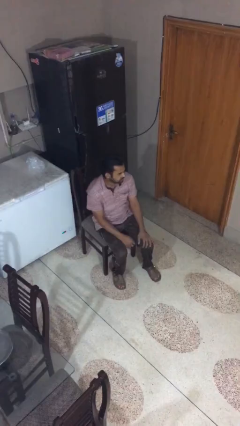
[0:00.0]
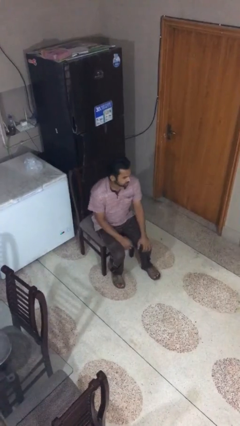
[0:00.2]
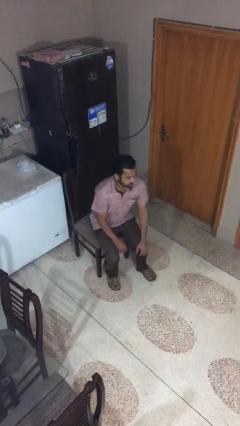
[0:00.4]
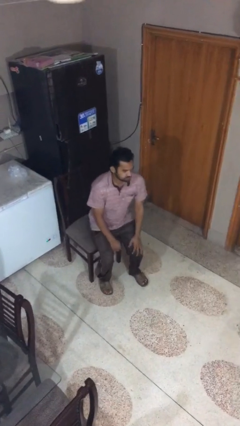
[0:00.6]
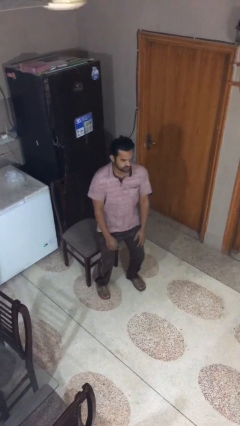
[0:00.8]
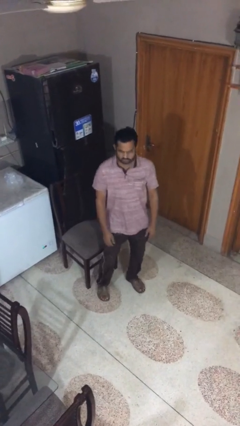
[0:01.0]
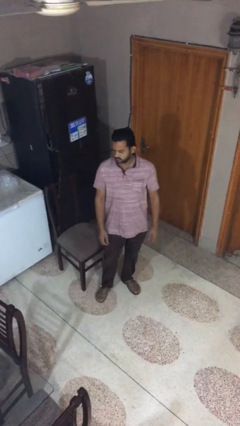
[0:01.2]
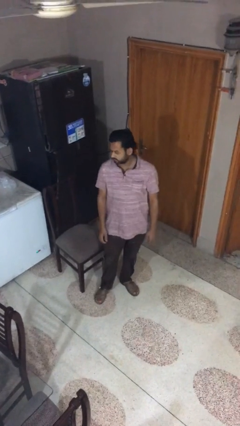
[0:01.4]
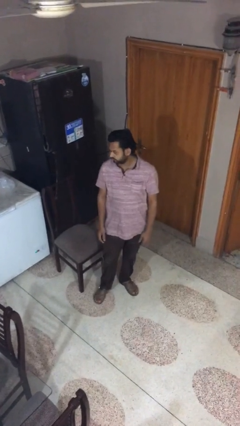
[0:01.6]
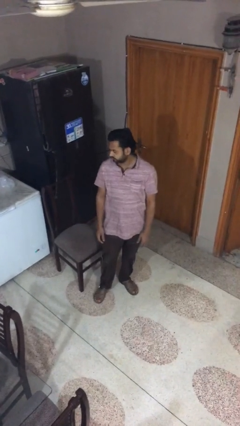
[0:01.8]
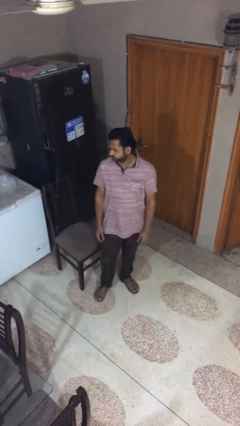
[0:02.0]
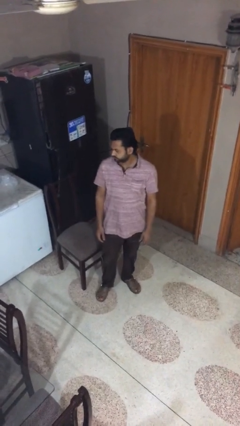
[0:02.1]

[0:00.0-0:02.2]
person stands up

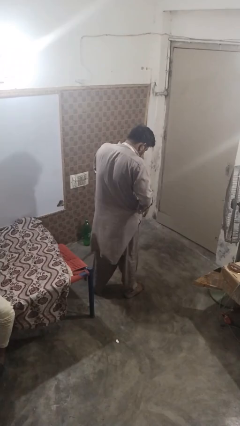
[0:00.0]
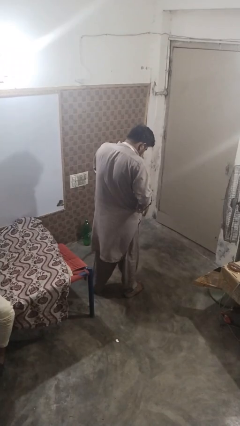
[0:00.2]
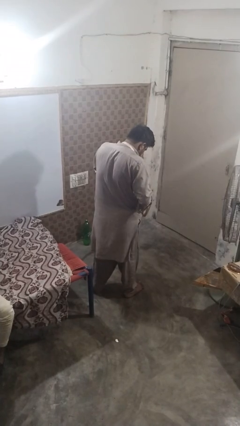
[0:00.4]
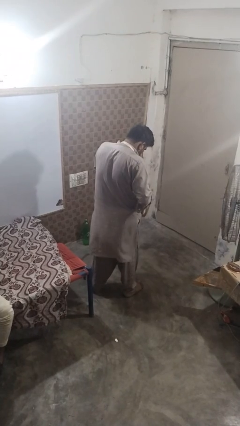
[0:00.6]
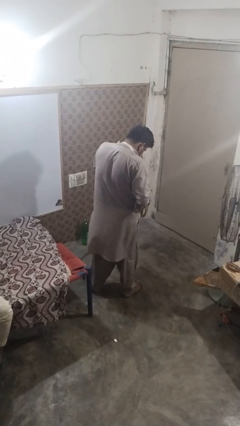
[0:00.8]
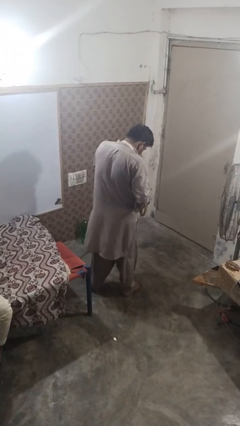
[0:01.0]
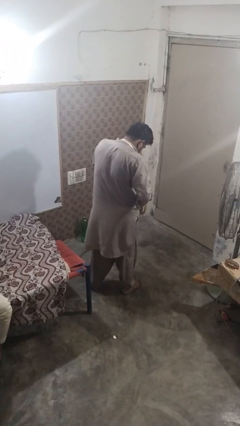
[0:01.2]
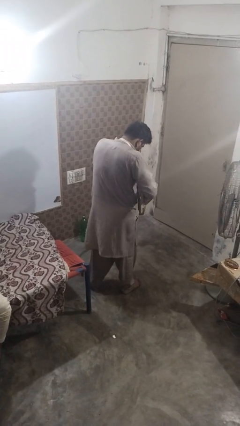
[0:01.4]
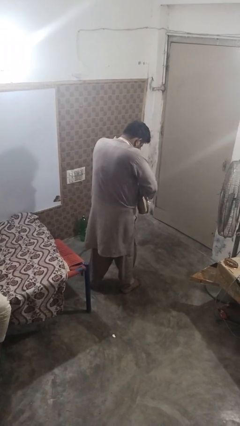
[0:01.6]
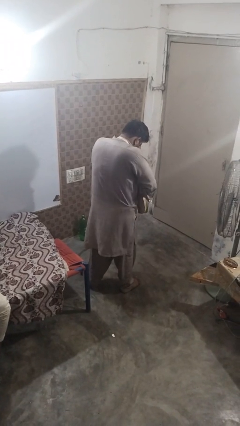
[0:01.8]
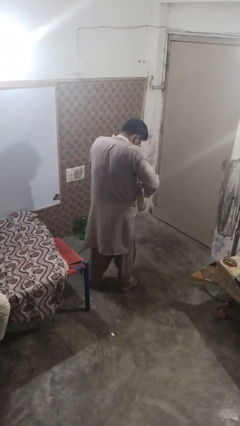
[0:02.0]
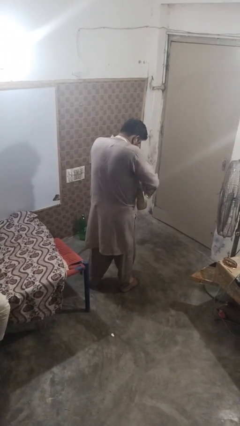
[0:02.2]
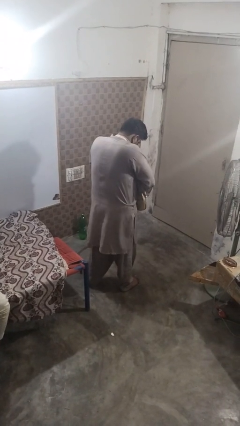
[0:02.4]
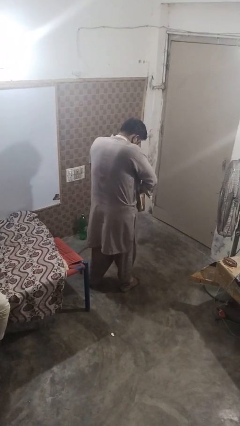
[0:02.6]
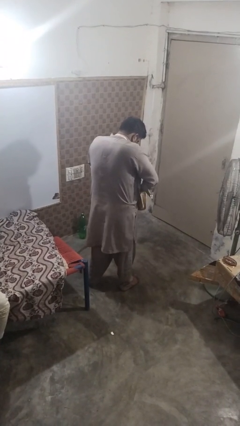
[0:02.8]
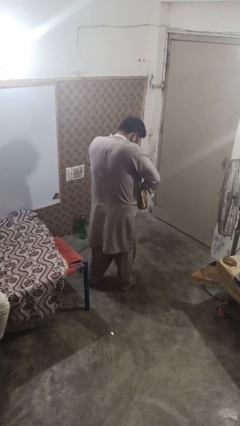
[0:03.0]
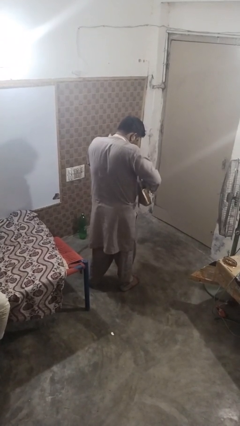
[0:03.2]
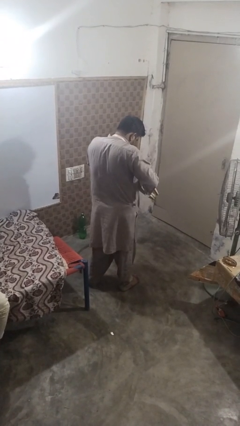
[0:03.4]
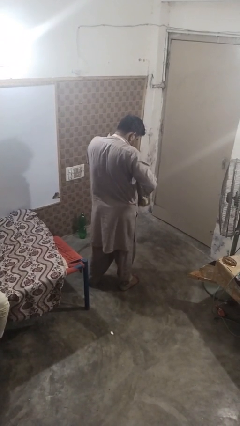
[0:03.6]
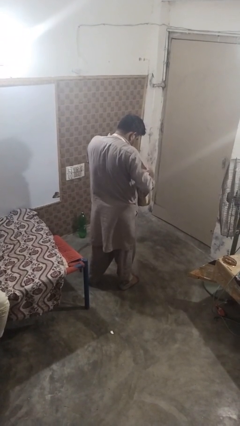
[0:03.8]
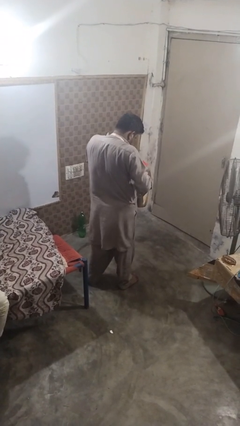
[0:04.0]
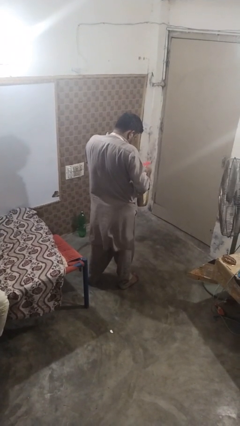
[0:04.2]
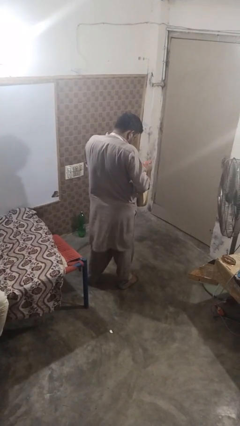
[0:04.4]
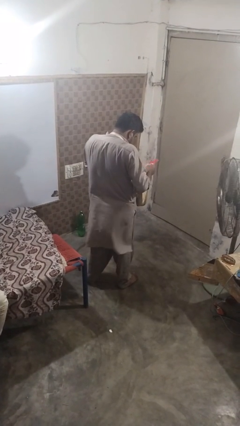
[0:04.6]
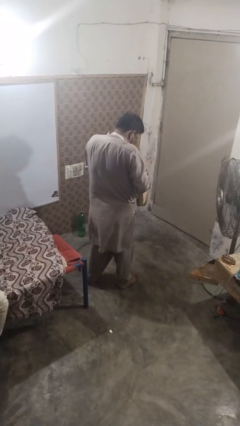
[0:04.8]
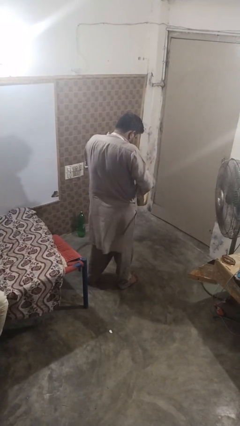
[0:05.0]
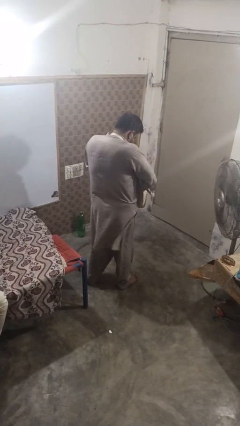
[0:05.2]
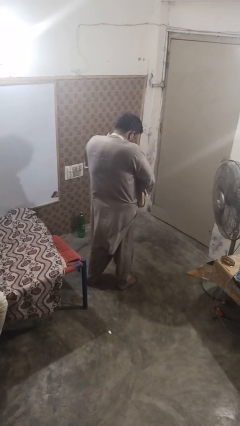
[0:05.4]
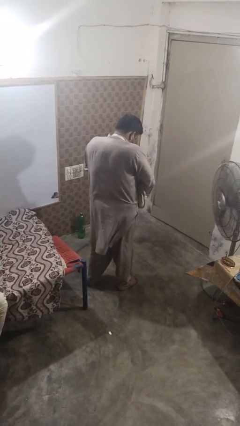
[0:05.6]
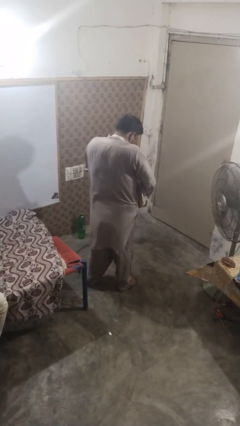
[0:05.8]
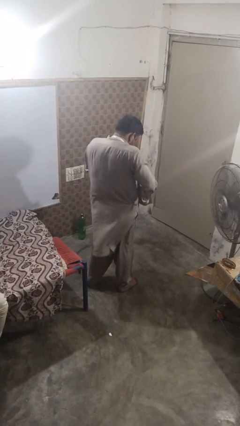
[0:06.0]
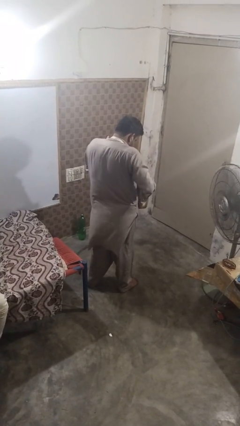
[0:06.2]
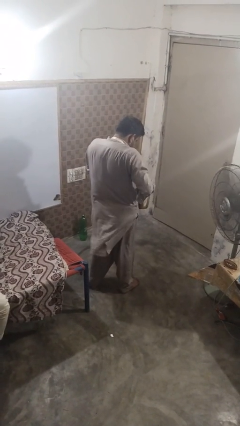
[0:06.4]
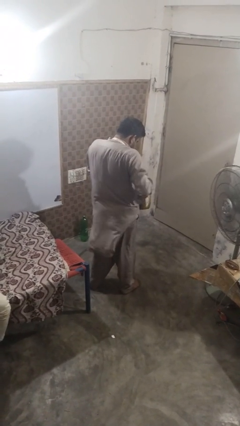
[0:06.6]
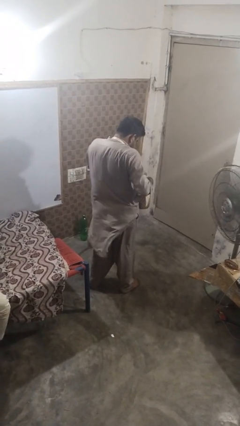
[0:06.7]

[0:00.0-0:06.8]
person takes object from purse

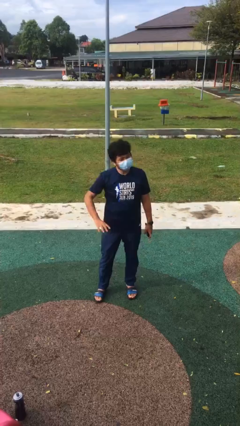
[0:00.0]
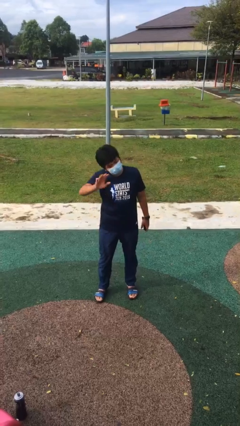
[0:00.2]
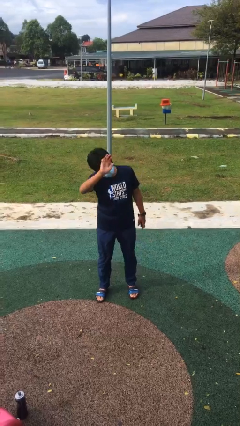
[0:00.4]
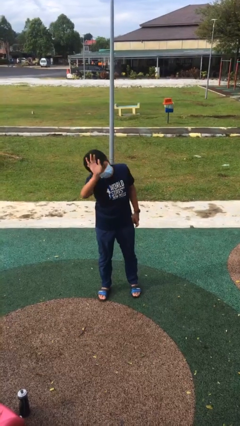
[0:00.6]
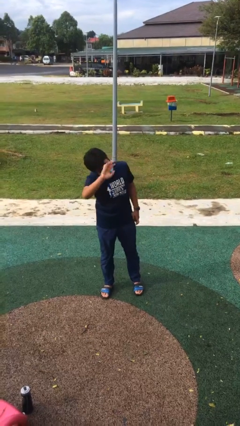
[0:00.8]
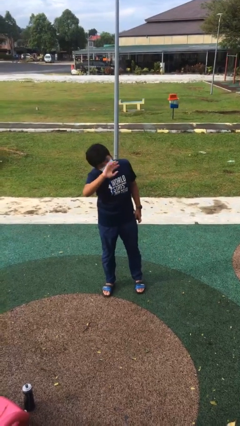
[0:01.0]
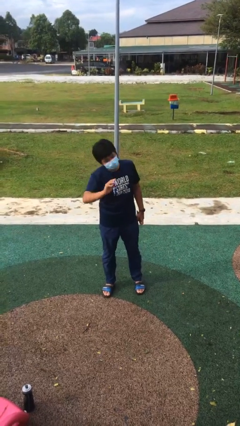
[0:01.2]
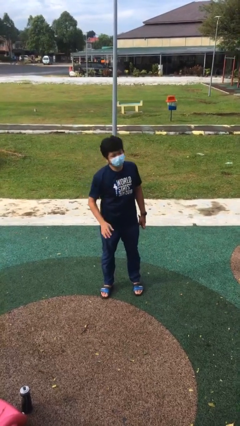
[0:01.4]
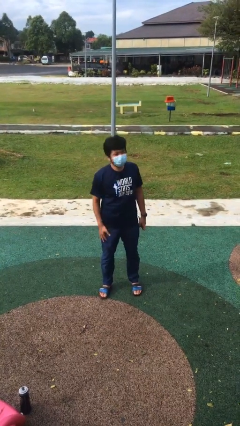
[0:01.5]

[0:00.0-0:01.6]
person waves at person

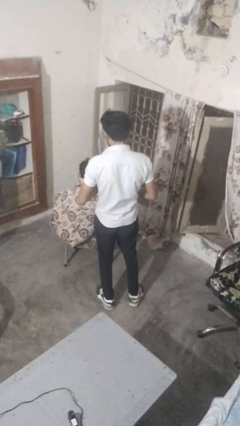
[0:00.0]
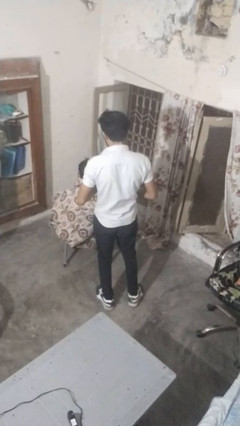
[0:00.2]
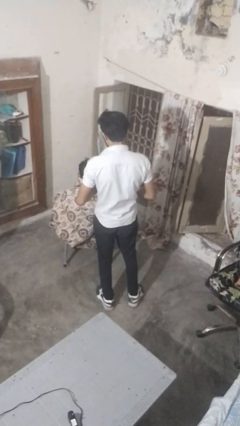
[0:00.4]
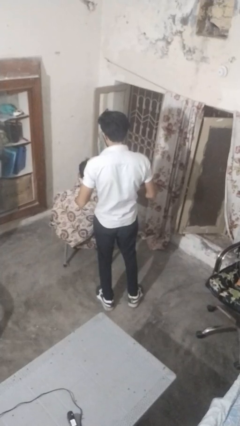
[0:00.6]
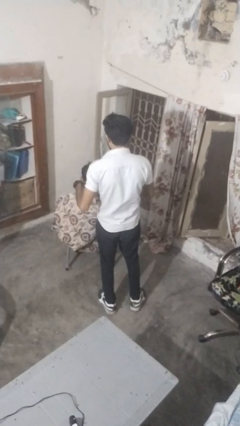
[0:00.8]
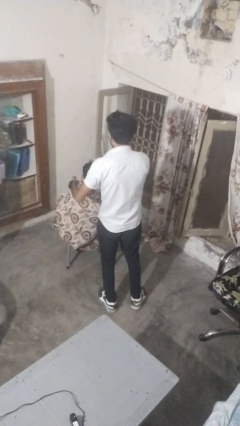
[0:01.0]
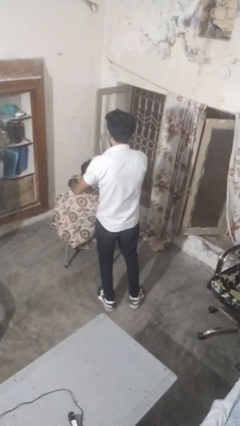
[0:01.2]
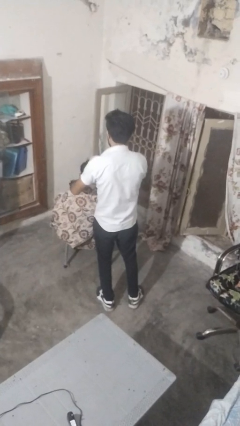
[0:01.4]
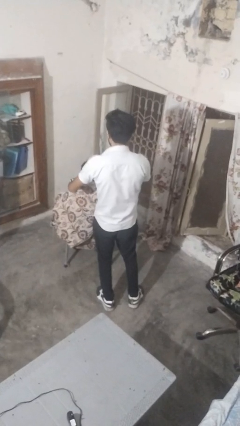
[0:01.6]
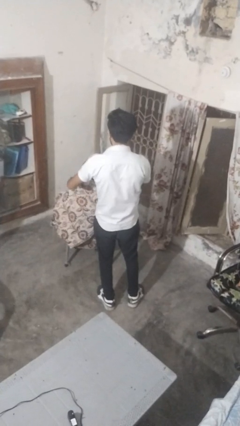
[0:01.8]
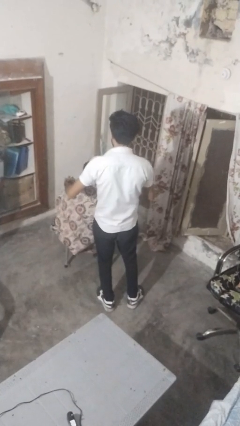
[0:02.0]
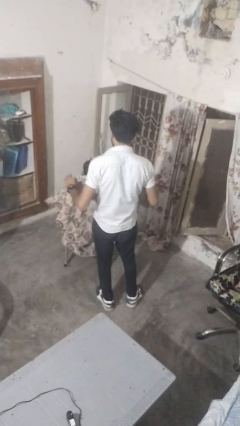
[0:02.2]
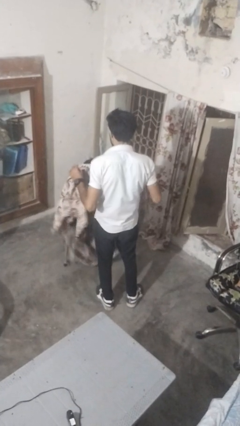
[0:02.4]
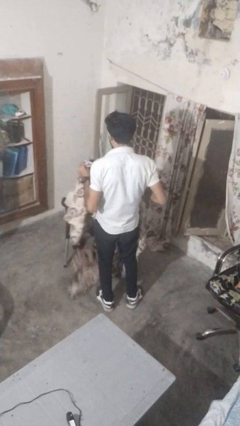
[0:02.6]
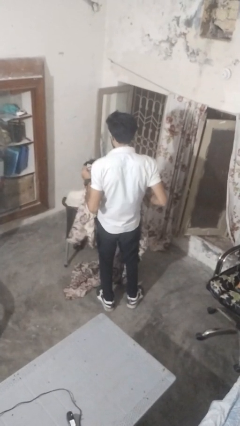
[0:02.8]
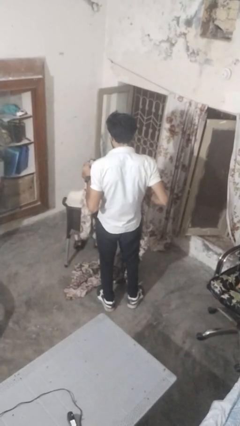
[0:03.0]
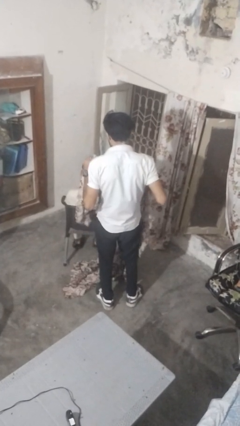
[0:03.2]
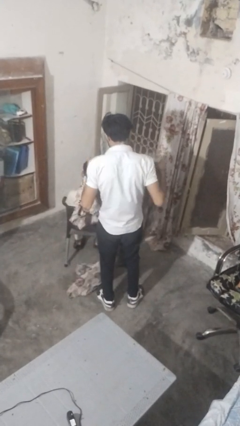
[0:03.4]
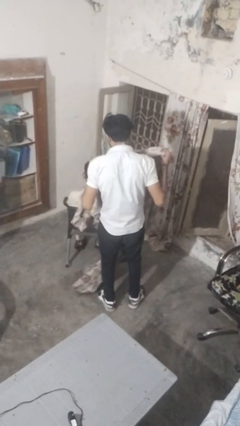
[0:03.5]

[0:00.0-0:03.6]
person uncovers friend with blanket

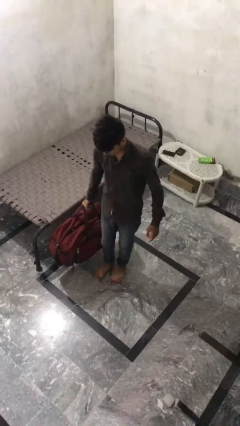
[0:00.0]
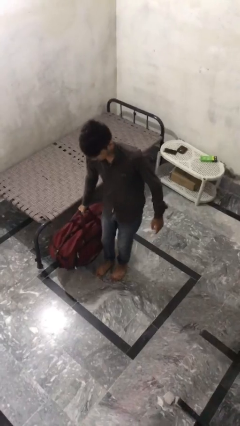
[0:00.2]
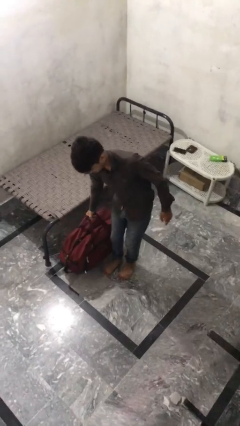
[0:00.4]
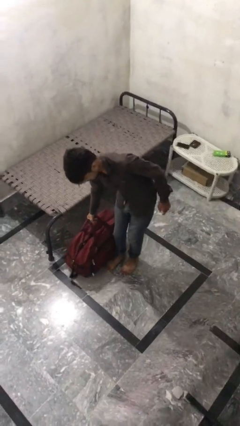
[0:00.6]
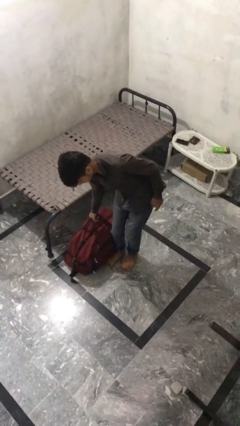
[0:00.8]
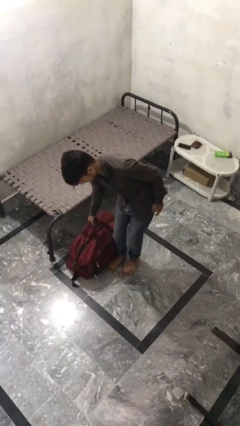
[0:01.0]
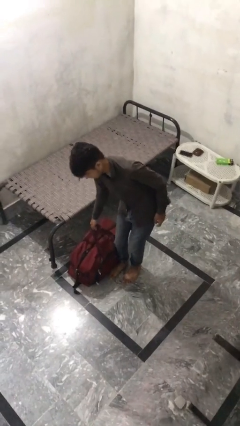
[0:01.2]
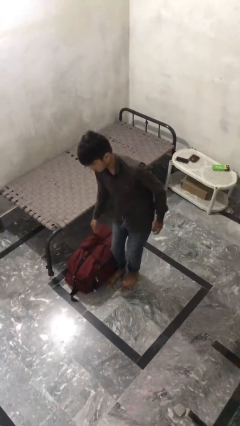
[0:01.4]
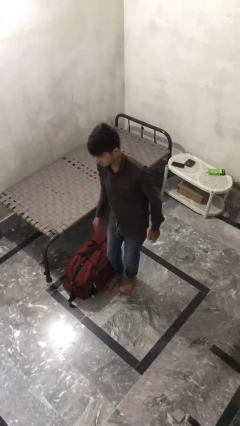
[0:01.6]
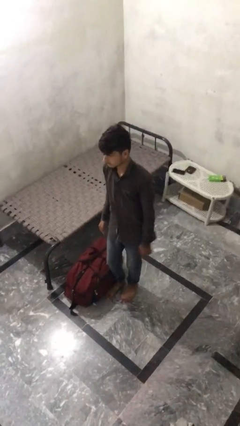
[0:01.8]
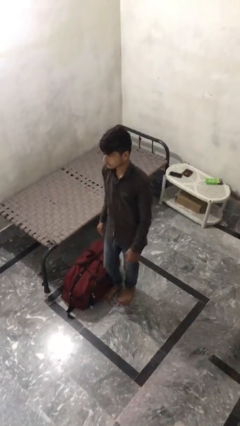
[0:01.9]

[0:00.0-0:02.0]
person puts down object on floor

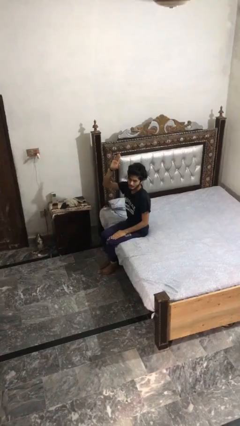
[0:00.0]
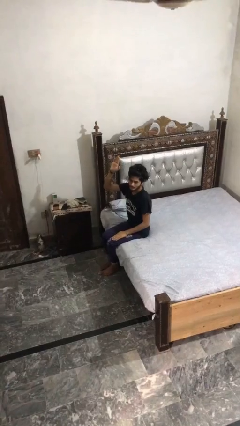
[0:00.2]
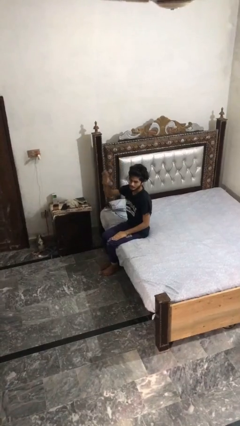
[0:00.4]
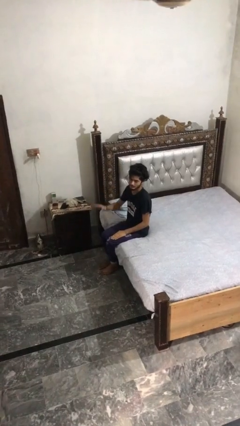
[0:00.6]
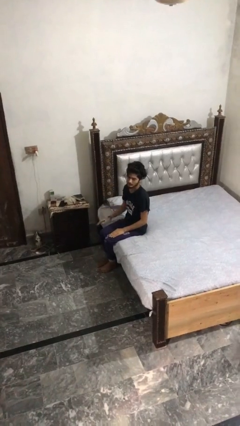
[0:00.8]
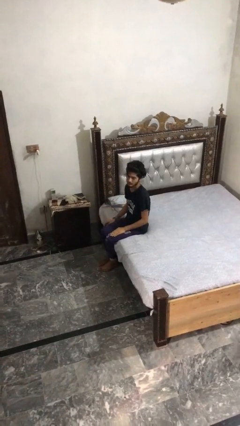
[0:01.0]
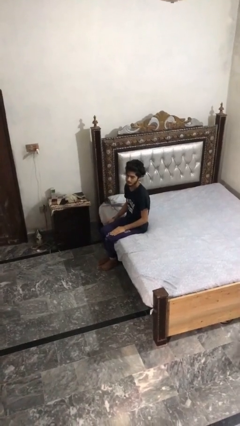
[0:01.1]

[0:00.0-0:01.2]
person gestures lower hand

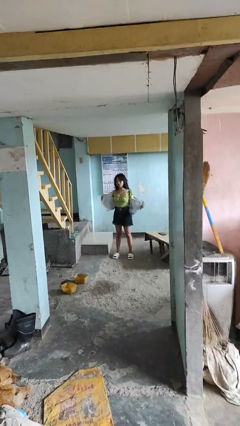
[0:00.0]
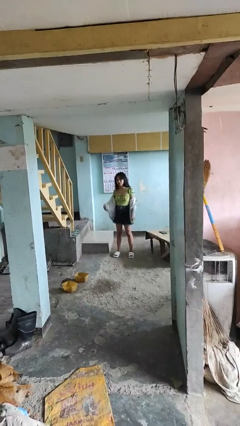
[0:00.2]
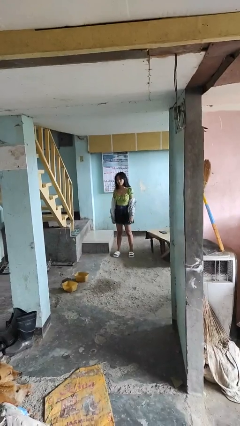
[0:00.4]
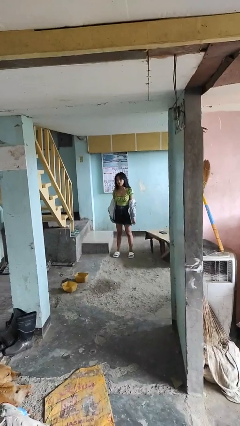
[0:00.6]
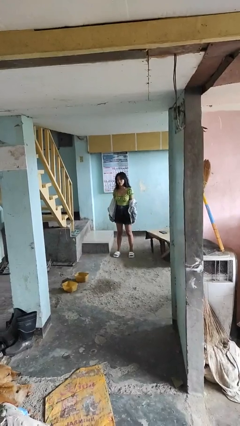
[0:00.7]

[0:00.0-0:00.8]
person takes off jacket
